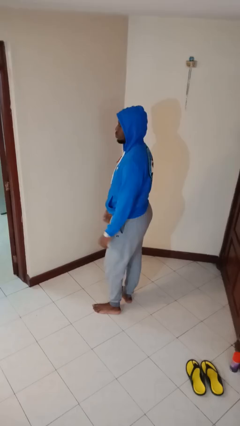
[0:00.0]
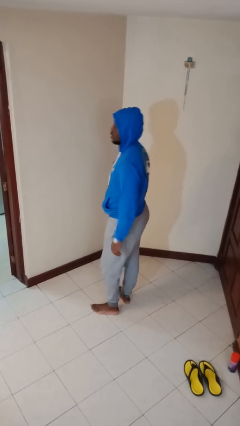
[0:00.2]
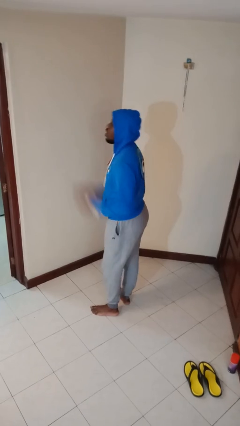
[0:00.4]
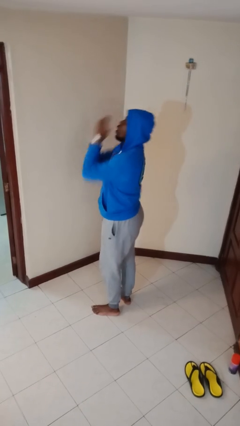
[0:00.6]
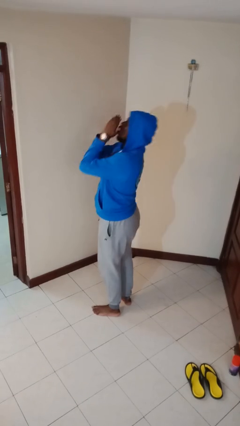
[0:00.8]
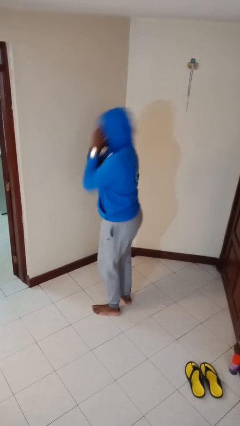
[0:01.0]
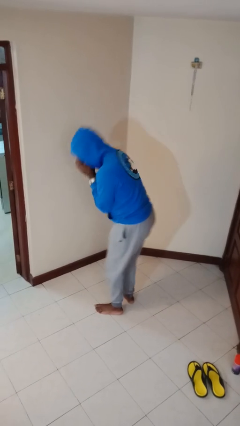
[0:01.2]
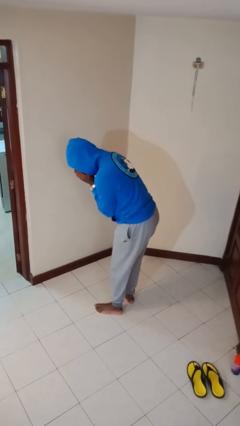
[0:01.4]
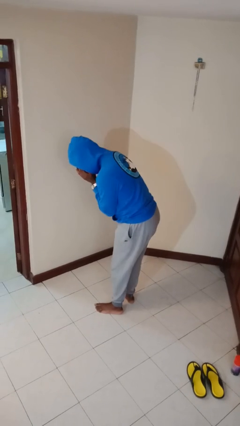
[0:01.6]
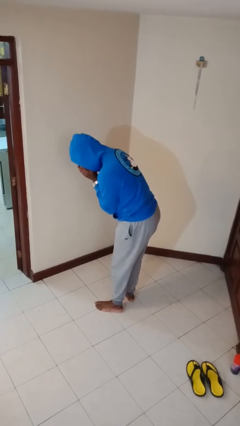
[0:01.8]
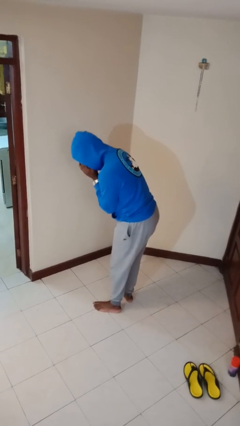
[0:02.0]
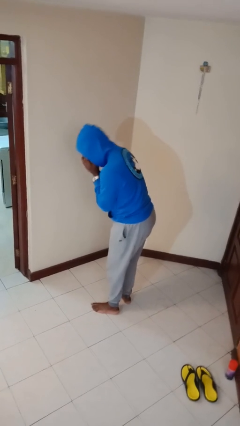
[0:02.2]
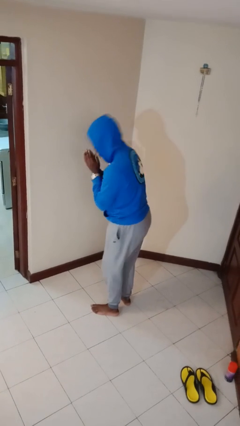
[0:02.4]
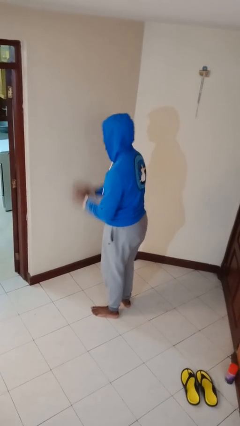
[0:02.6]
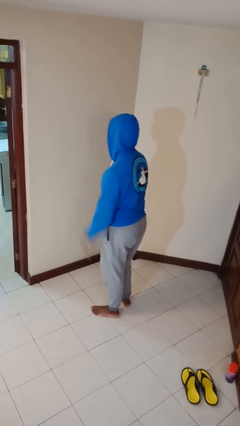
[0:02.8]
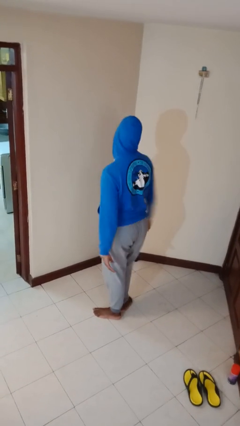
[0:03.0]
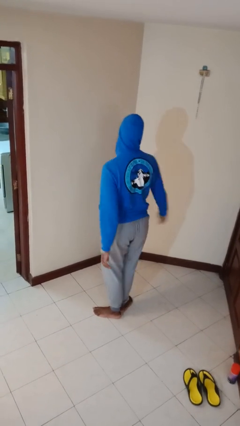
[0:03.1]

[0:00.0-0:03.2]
person sneezes into hand

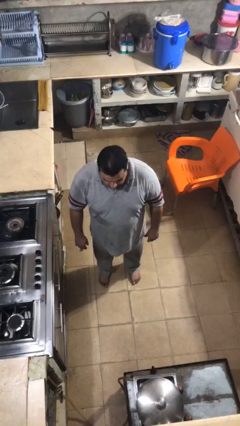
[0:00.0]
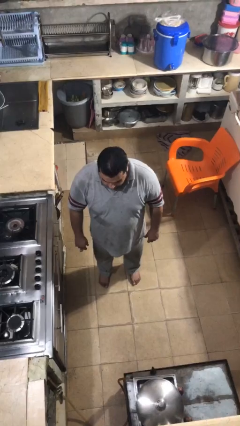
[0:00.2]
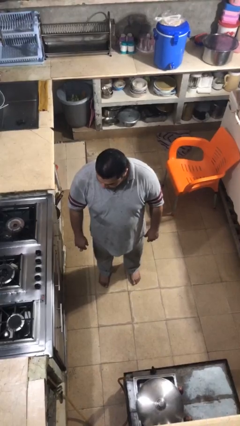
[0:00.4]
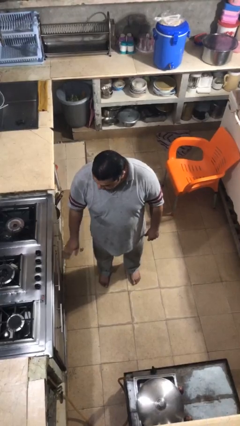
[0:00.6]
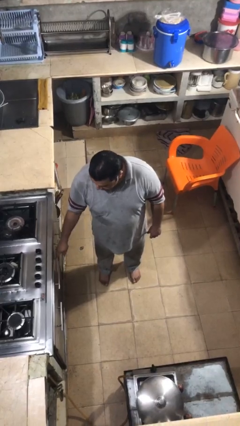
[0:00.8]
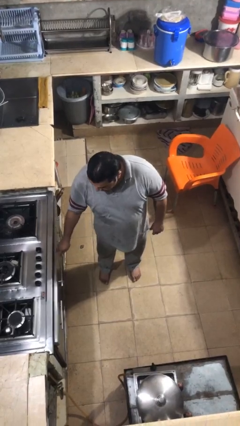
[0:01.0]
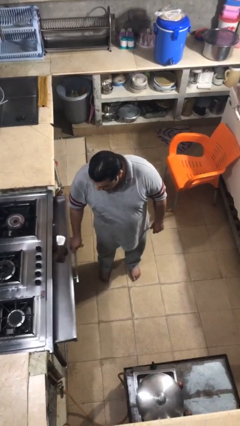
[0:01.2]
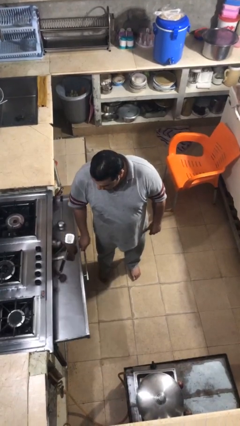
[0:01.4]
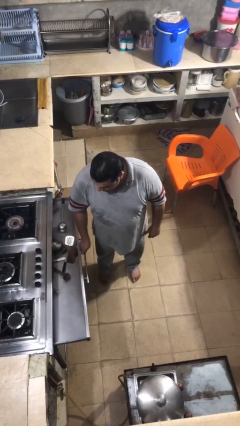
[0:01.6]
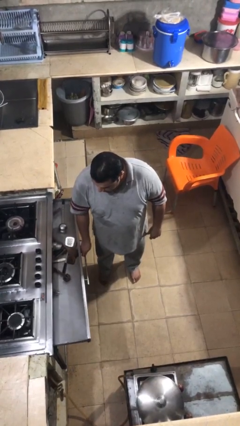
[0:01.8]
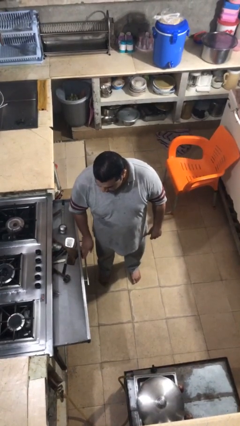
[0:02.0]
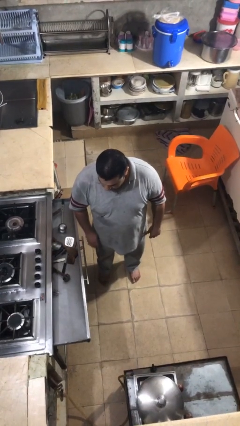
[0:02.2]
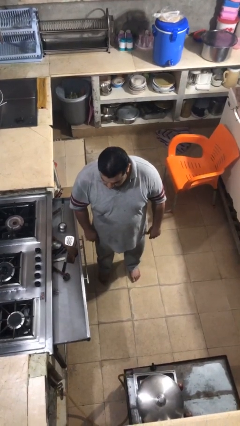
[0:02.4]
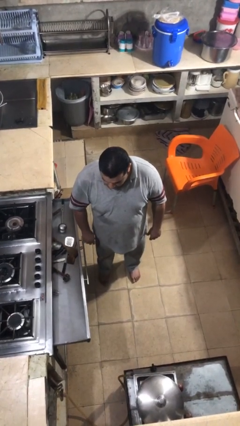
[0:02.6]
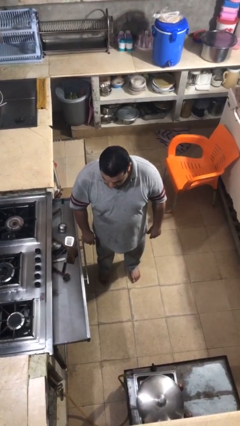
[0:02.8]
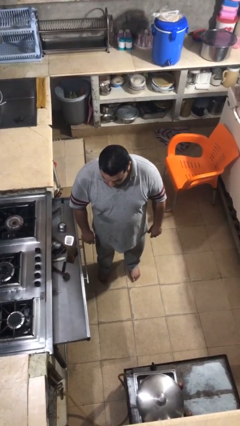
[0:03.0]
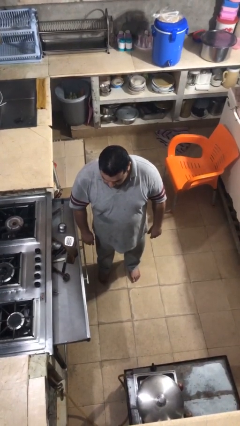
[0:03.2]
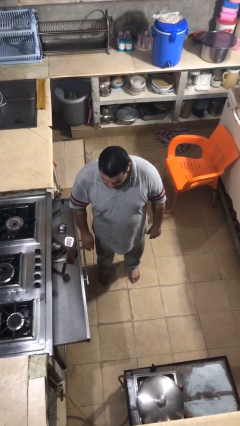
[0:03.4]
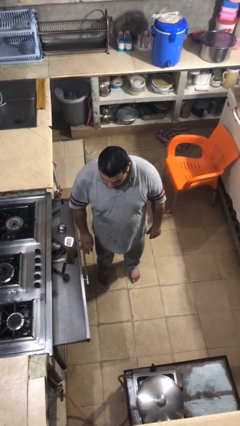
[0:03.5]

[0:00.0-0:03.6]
person opens kitchen drawer

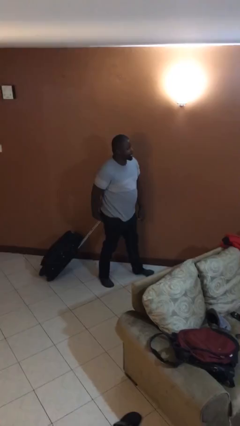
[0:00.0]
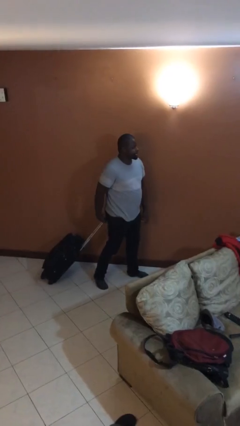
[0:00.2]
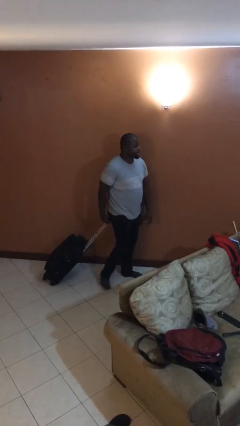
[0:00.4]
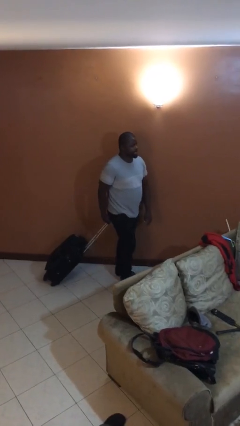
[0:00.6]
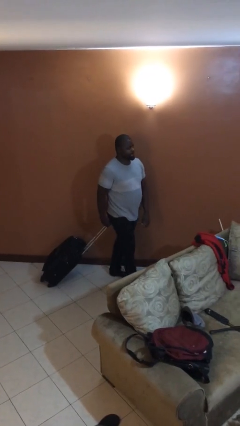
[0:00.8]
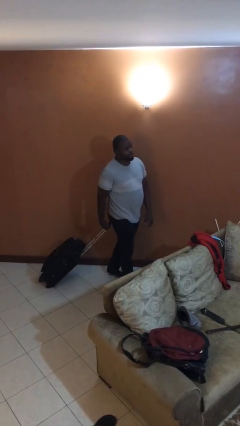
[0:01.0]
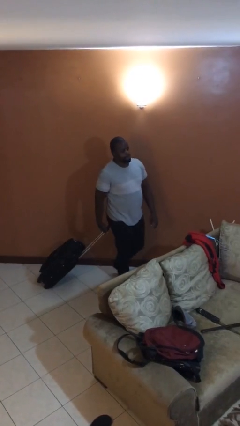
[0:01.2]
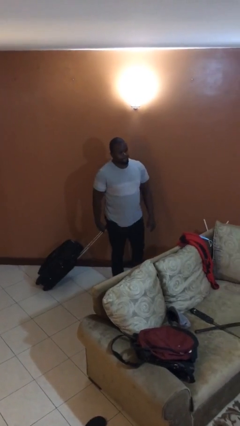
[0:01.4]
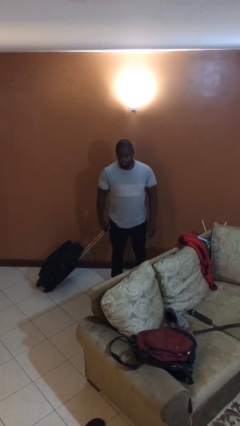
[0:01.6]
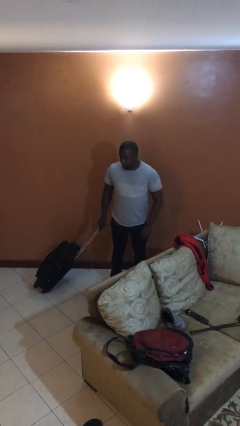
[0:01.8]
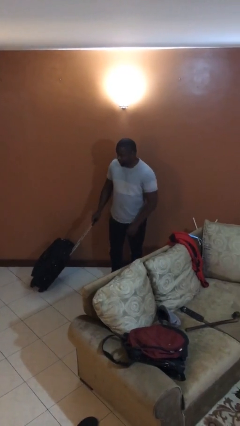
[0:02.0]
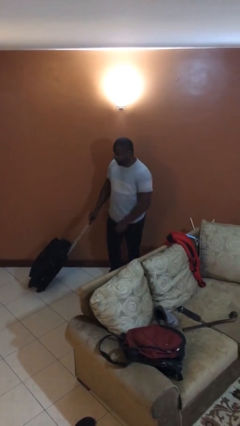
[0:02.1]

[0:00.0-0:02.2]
person pulls wheeled cart

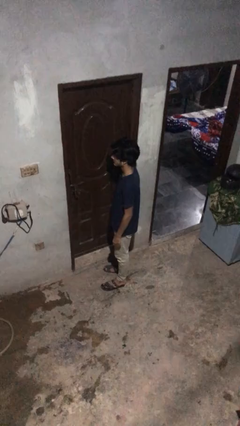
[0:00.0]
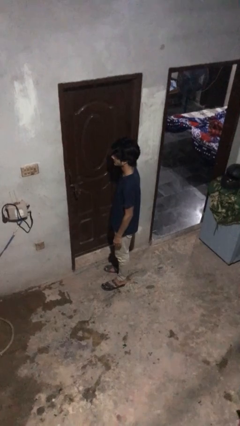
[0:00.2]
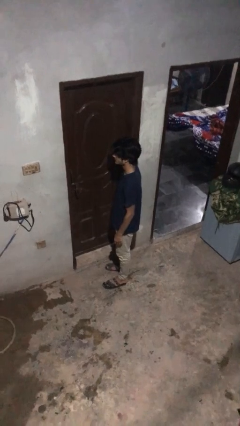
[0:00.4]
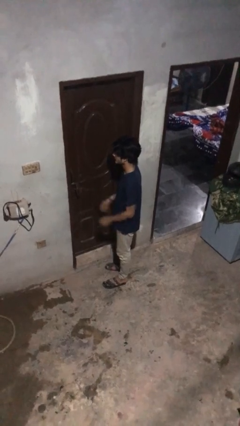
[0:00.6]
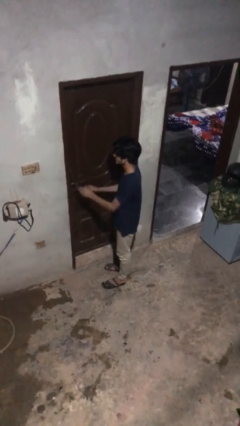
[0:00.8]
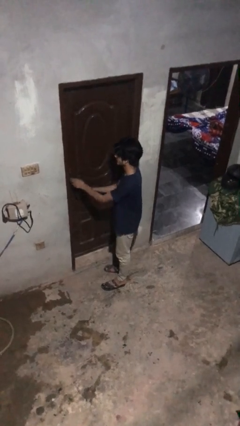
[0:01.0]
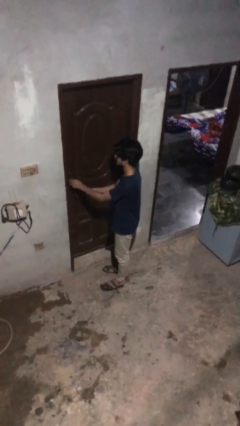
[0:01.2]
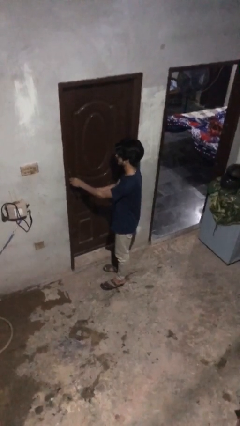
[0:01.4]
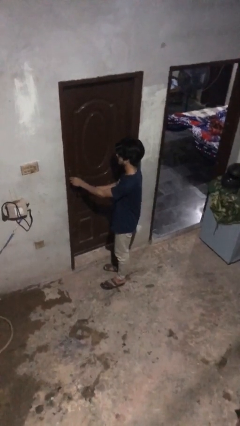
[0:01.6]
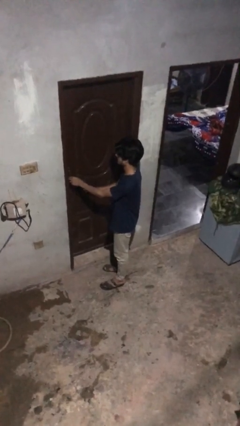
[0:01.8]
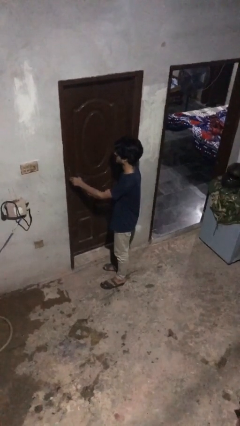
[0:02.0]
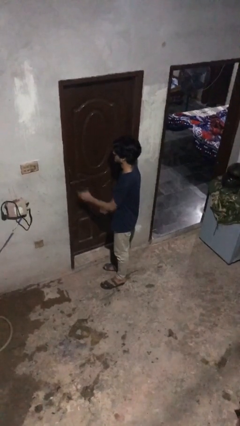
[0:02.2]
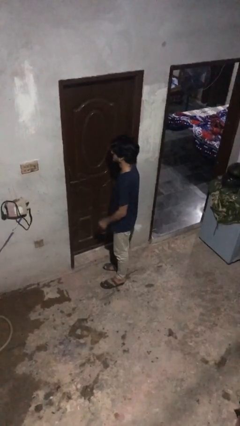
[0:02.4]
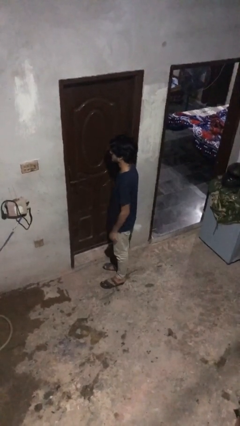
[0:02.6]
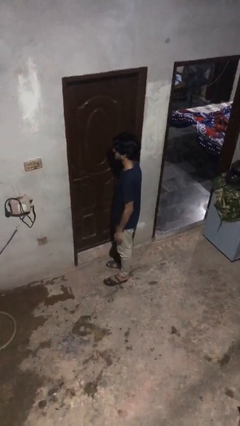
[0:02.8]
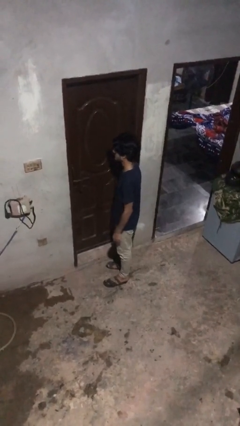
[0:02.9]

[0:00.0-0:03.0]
person unlocks door with keys

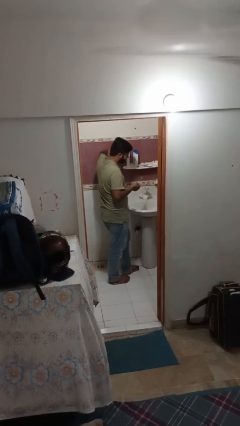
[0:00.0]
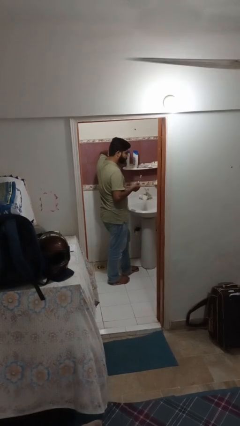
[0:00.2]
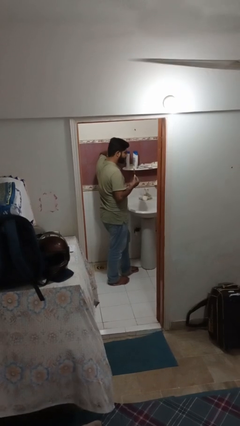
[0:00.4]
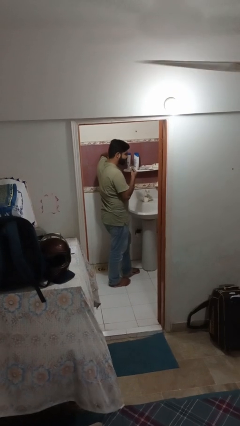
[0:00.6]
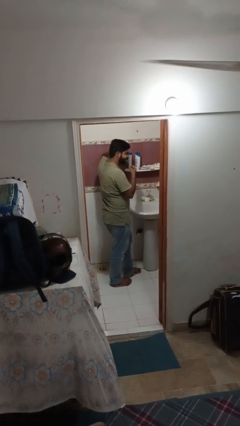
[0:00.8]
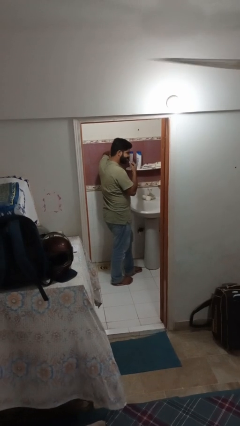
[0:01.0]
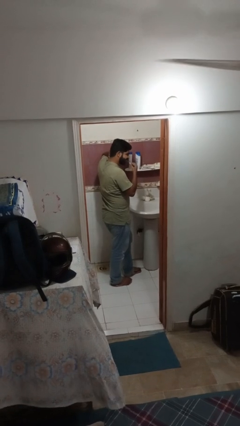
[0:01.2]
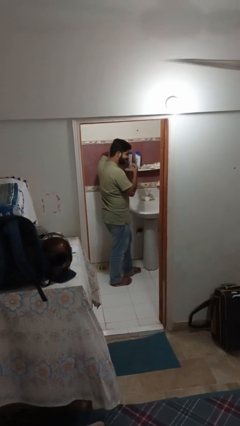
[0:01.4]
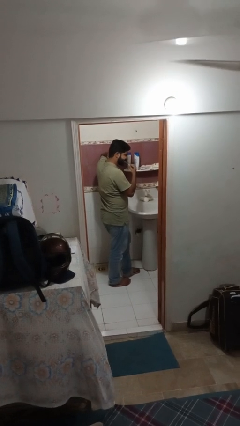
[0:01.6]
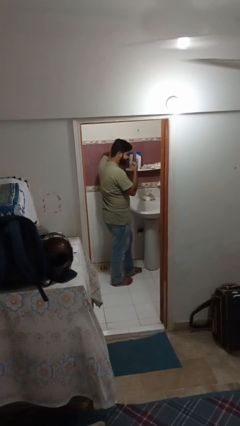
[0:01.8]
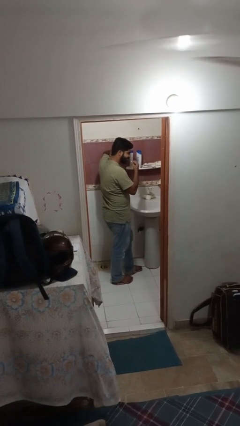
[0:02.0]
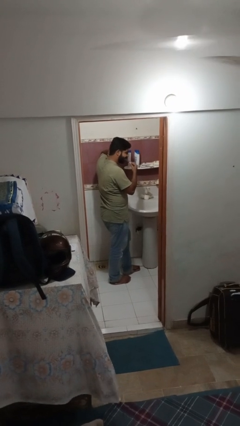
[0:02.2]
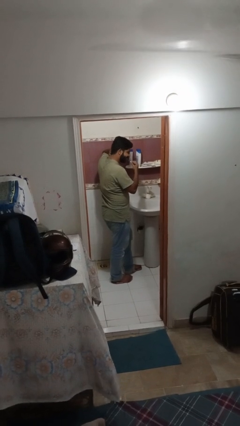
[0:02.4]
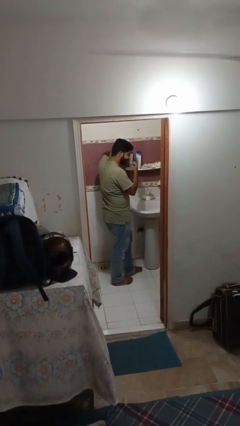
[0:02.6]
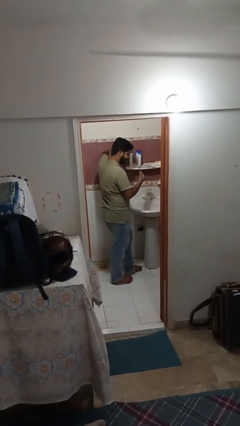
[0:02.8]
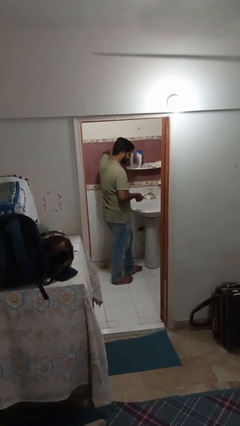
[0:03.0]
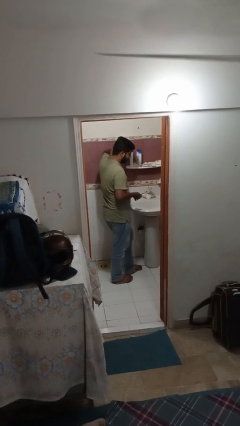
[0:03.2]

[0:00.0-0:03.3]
person brushes teeth

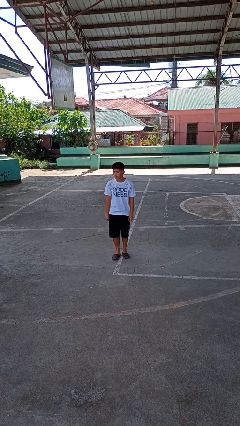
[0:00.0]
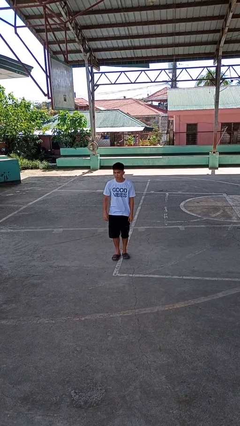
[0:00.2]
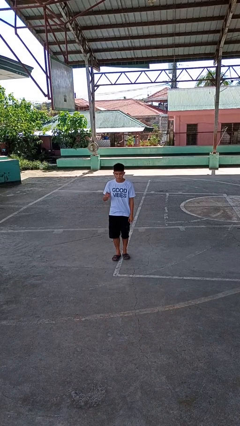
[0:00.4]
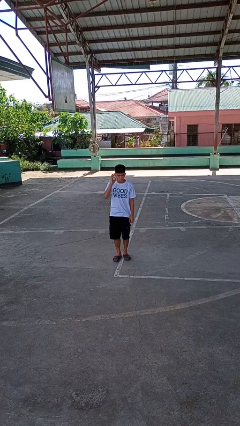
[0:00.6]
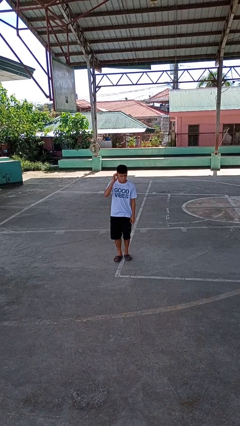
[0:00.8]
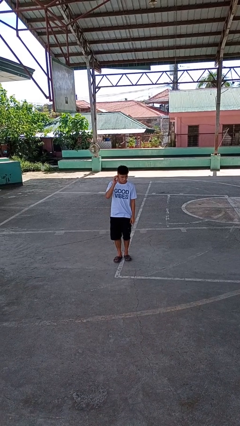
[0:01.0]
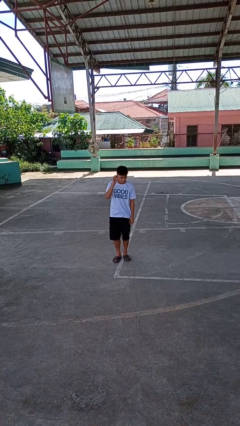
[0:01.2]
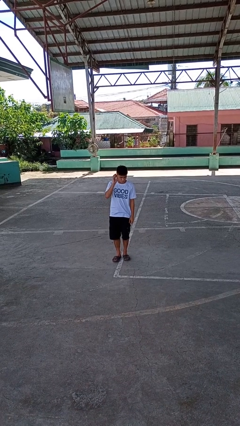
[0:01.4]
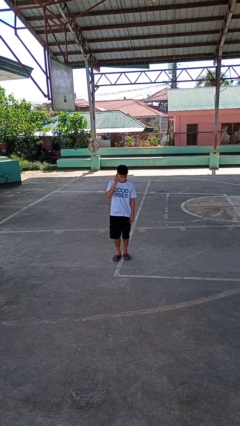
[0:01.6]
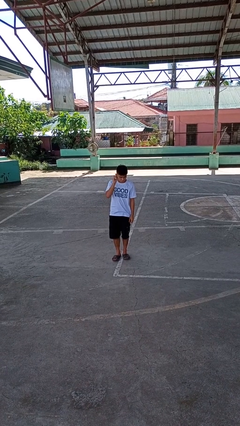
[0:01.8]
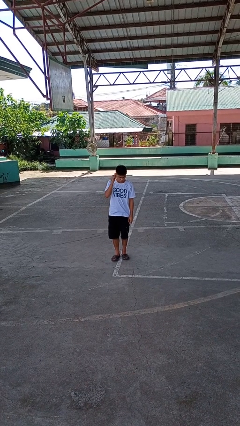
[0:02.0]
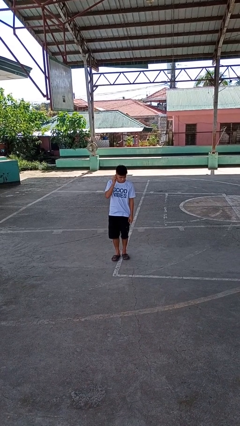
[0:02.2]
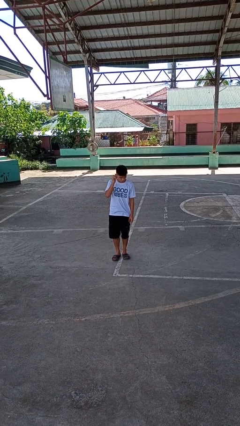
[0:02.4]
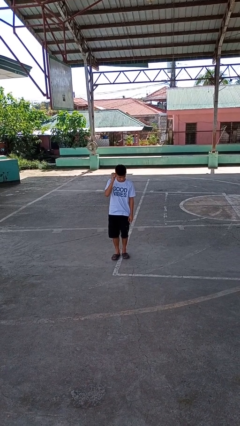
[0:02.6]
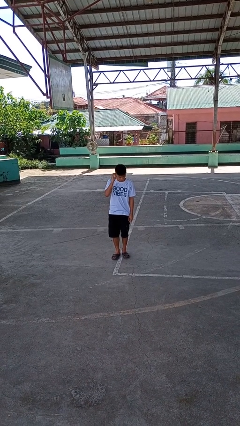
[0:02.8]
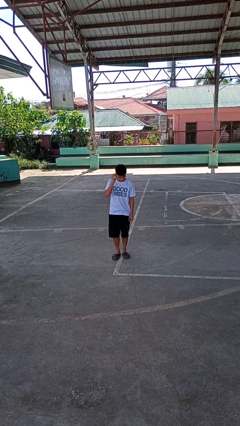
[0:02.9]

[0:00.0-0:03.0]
person touches earlobe
